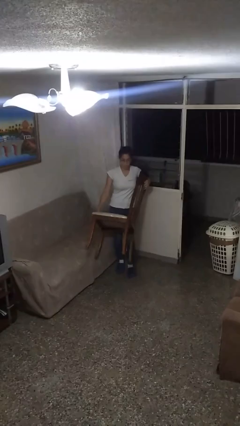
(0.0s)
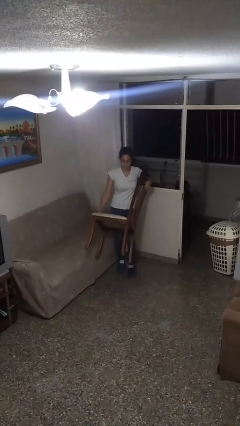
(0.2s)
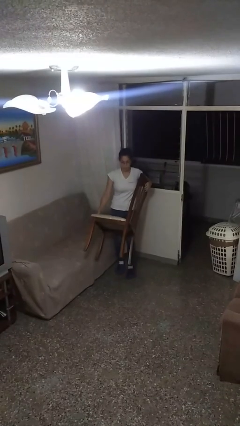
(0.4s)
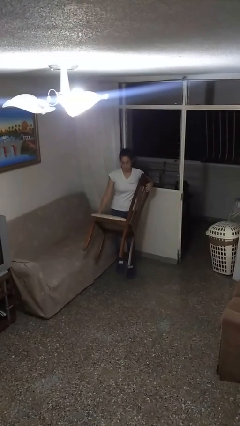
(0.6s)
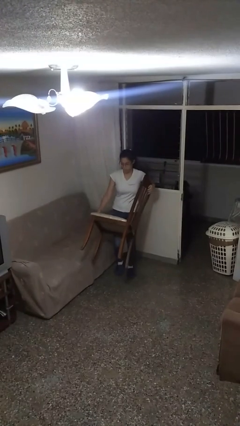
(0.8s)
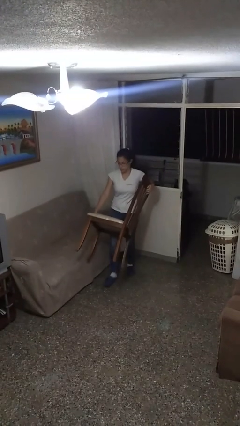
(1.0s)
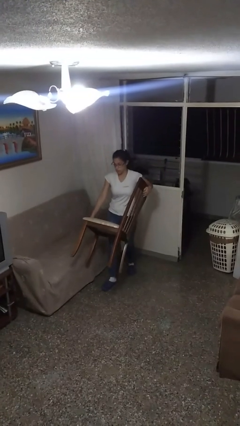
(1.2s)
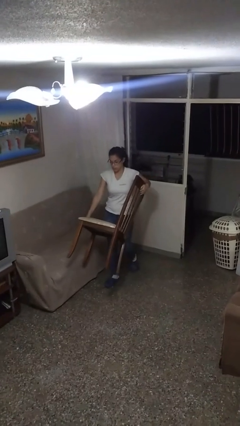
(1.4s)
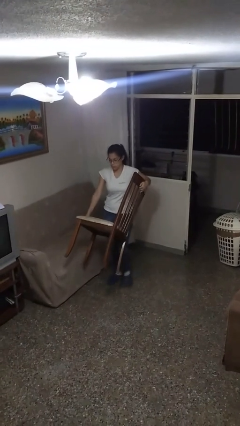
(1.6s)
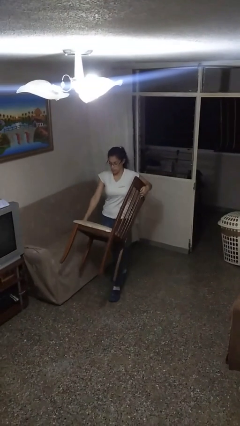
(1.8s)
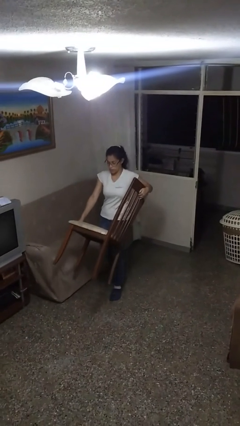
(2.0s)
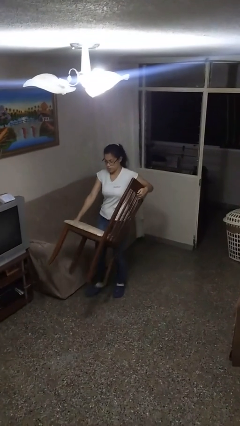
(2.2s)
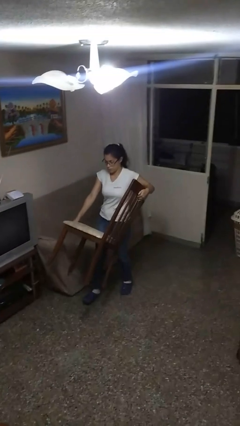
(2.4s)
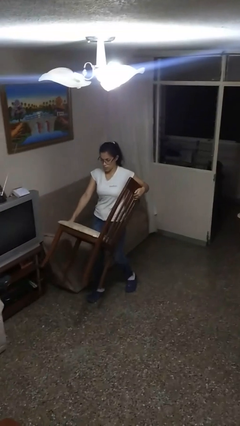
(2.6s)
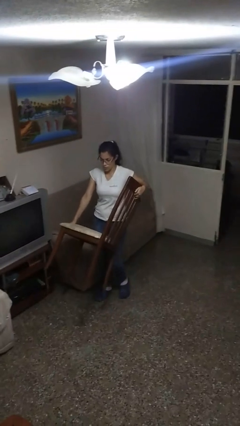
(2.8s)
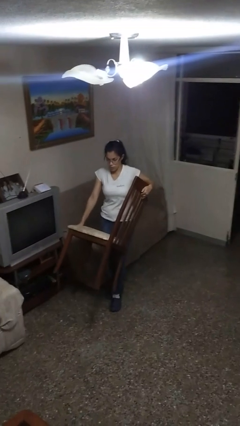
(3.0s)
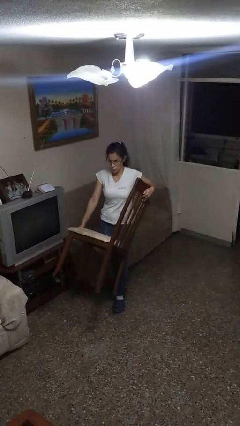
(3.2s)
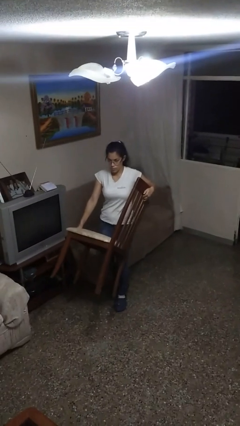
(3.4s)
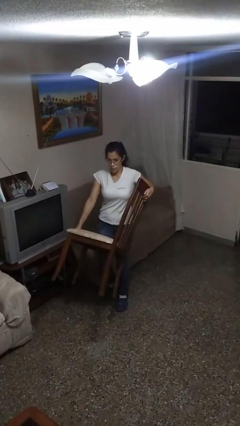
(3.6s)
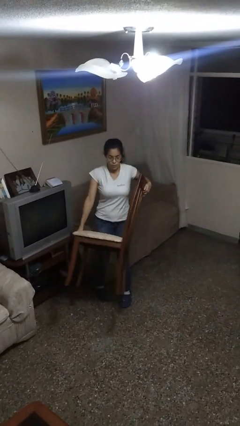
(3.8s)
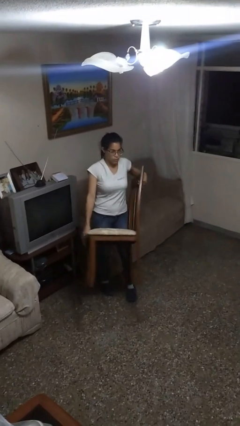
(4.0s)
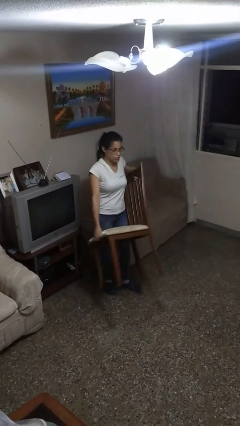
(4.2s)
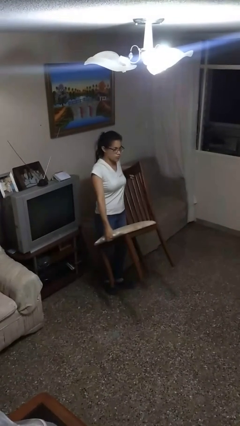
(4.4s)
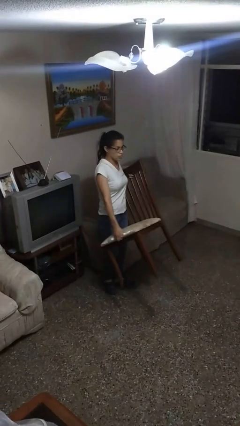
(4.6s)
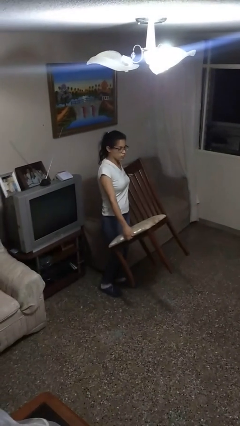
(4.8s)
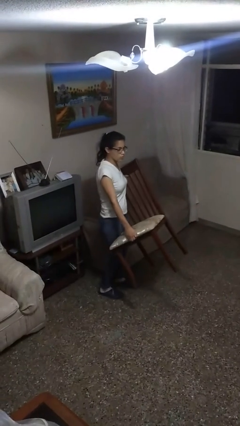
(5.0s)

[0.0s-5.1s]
person carries furniture

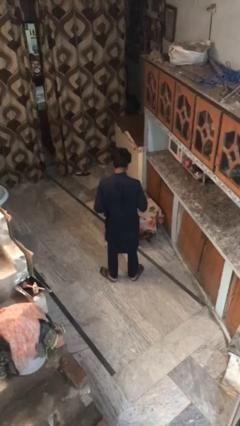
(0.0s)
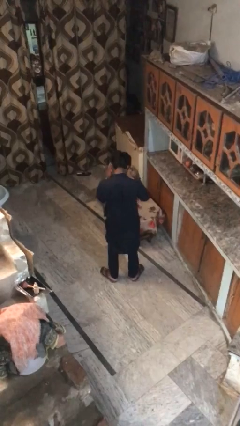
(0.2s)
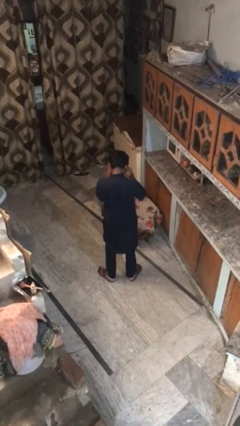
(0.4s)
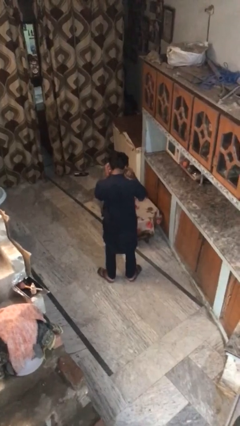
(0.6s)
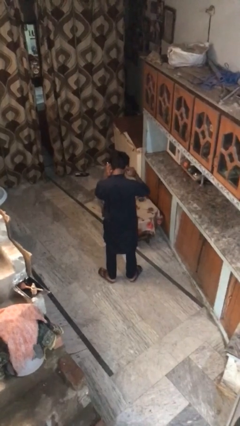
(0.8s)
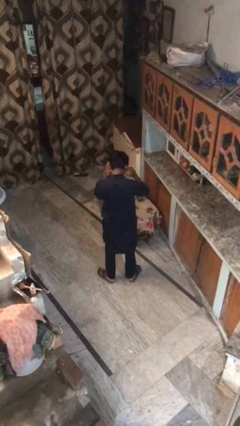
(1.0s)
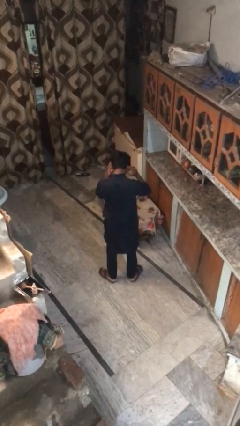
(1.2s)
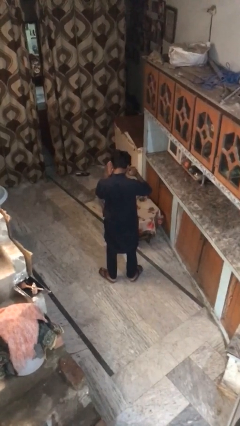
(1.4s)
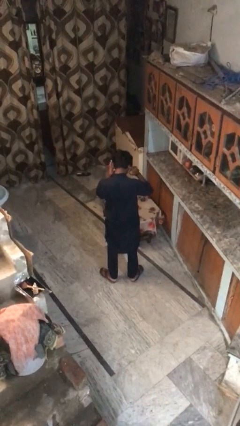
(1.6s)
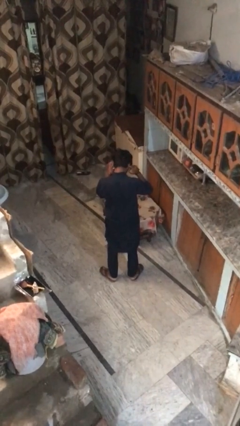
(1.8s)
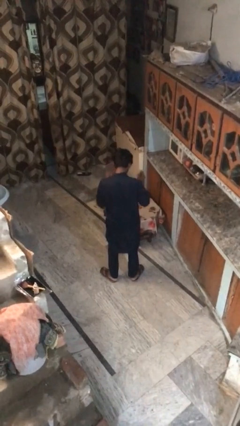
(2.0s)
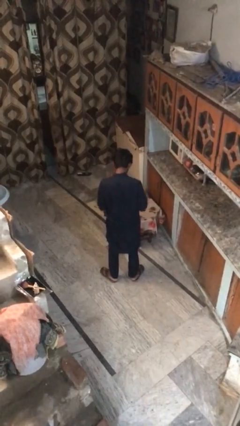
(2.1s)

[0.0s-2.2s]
person puts fingers in ear

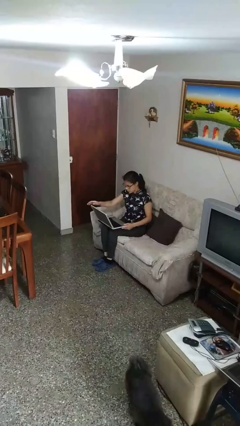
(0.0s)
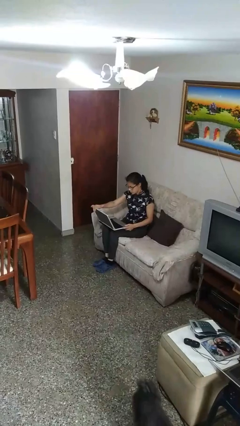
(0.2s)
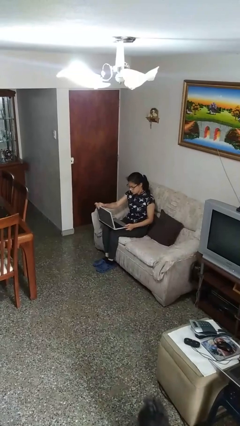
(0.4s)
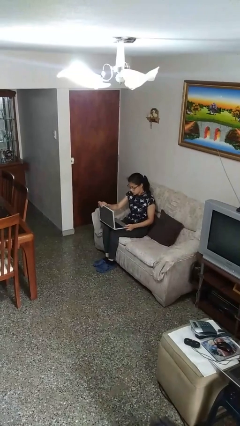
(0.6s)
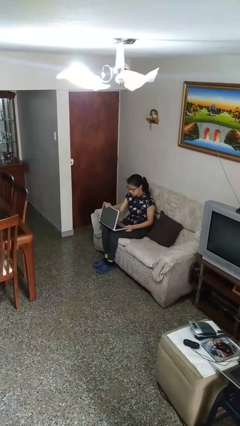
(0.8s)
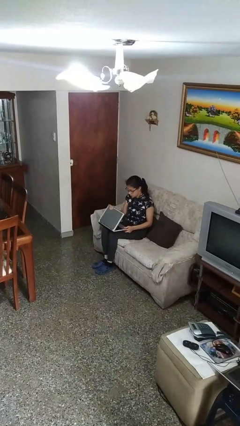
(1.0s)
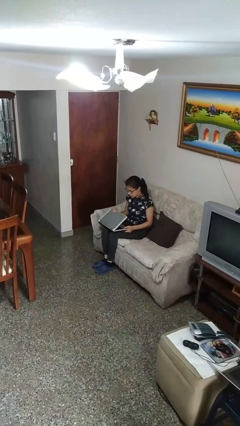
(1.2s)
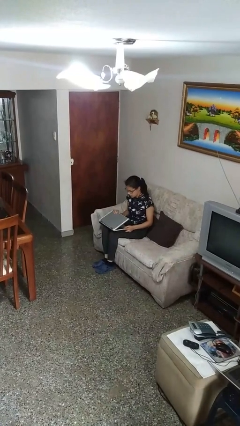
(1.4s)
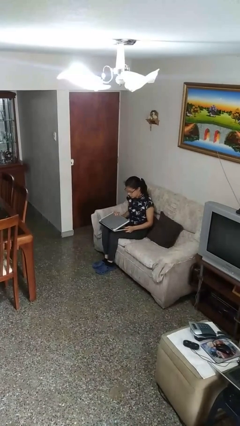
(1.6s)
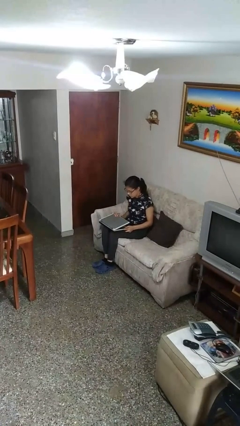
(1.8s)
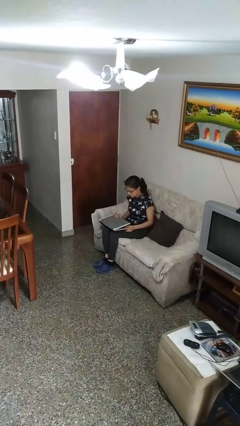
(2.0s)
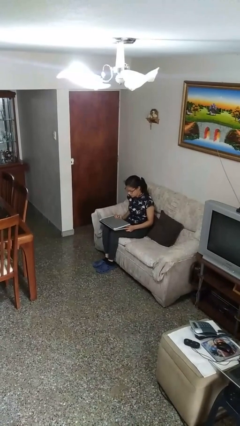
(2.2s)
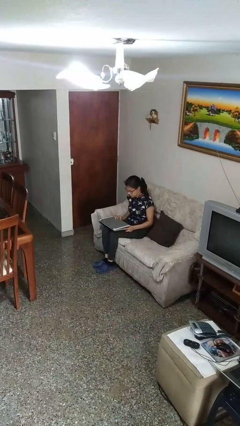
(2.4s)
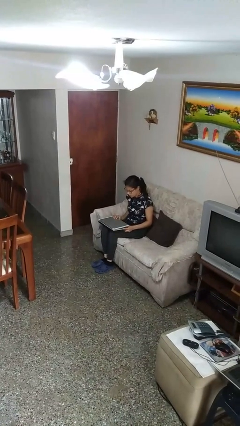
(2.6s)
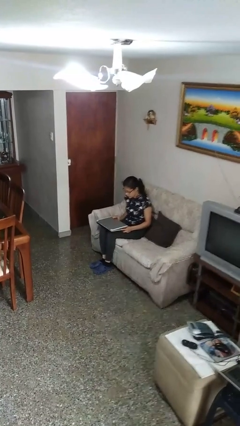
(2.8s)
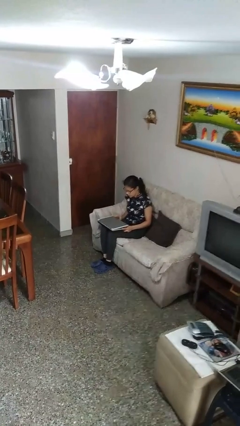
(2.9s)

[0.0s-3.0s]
person closes laptop

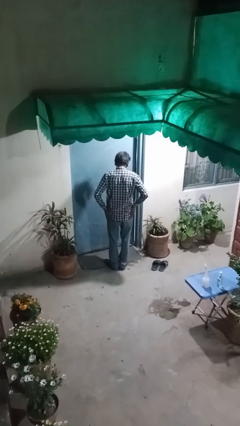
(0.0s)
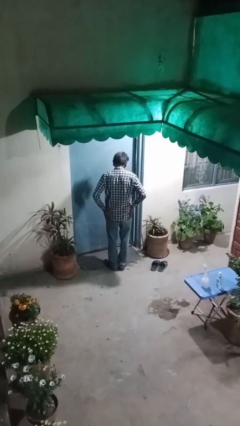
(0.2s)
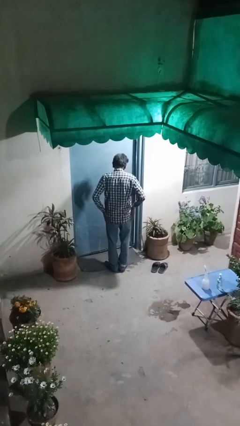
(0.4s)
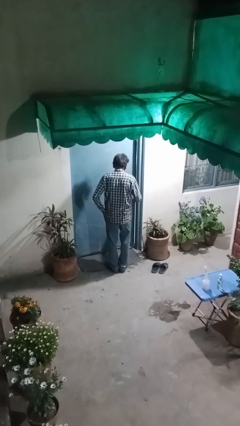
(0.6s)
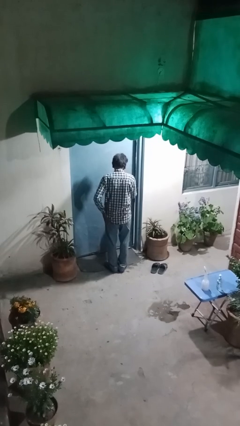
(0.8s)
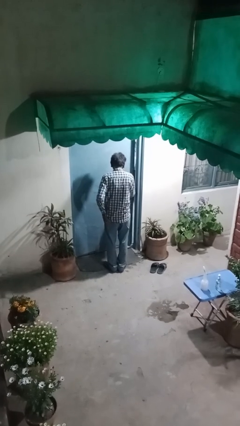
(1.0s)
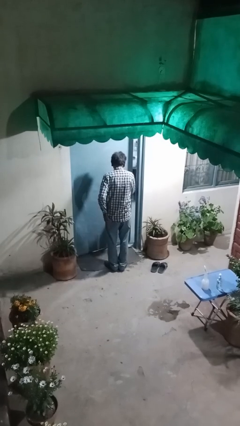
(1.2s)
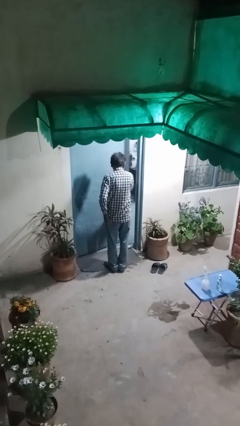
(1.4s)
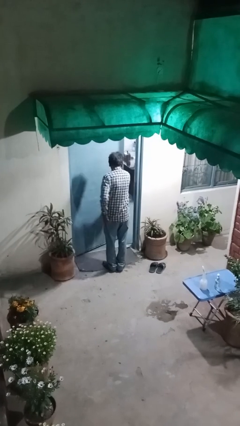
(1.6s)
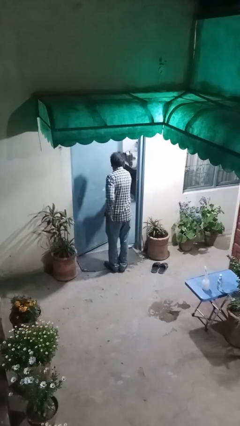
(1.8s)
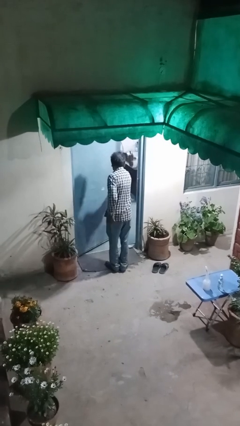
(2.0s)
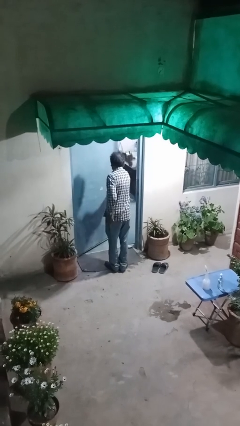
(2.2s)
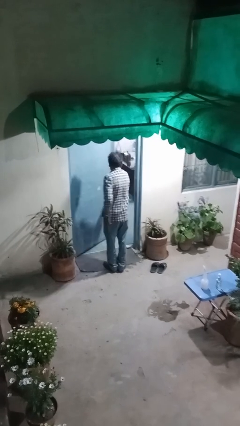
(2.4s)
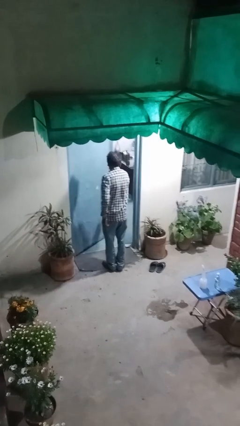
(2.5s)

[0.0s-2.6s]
person opens facility door

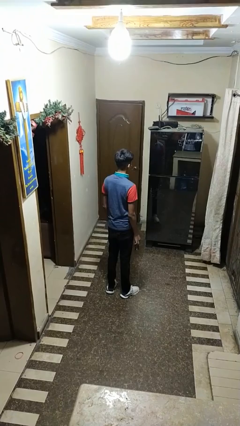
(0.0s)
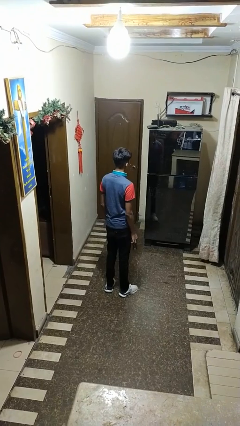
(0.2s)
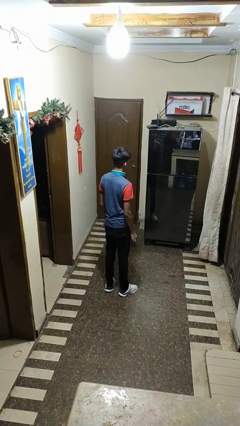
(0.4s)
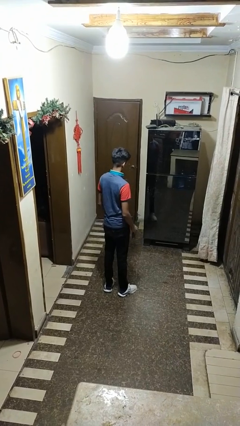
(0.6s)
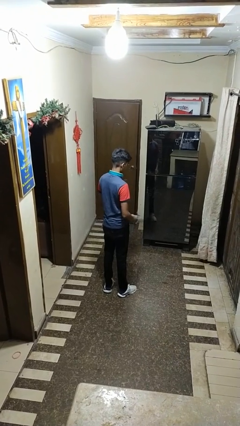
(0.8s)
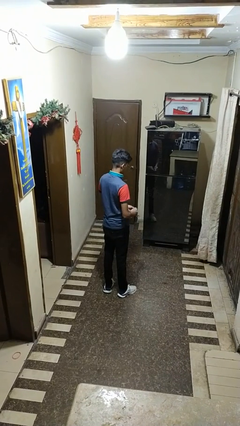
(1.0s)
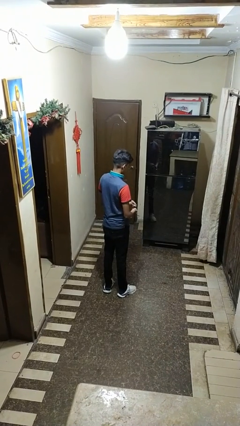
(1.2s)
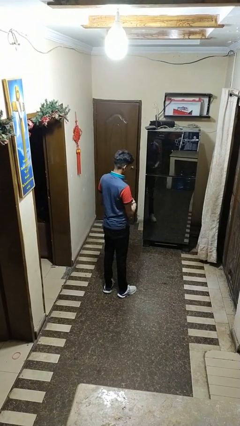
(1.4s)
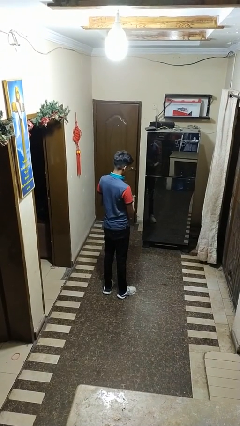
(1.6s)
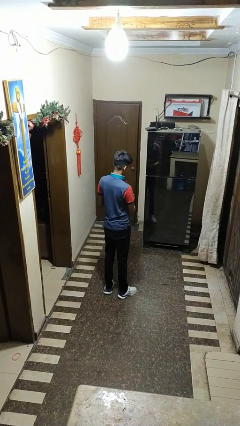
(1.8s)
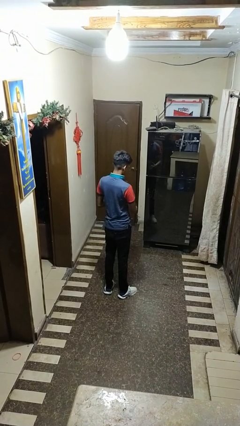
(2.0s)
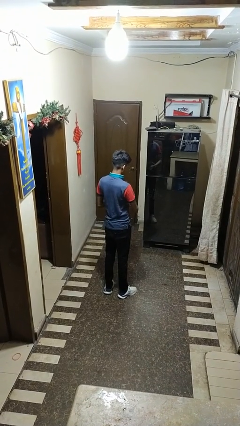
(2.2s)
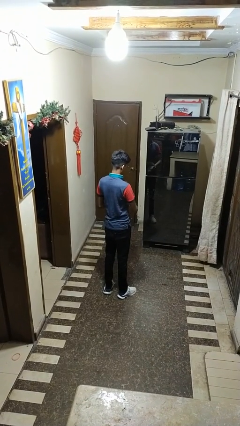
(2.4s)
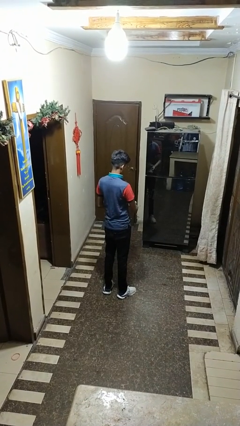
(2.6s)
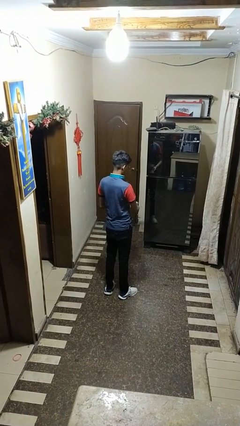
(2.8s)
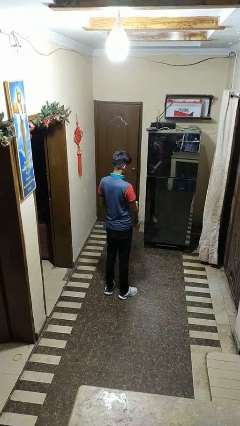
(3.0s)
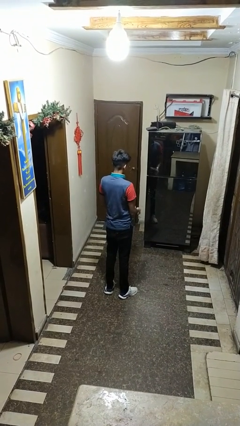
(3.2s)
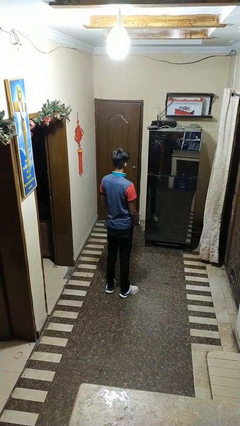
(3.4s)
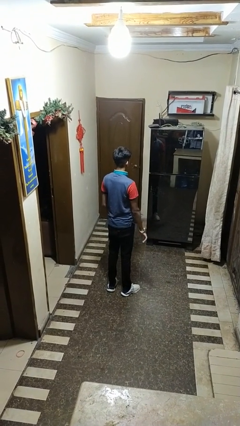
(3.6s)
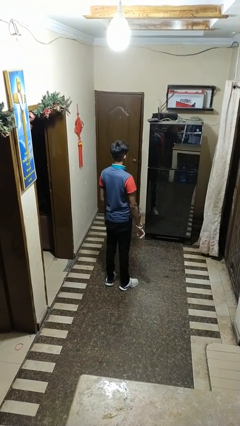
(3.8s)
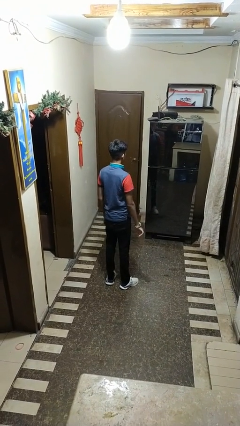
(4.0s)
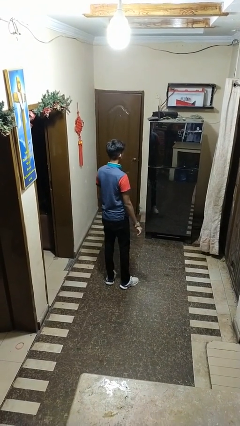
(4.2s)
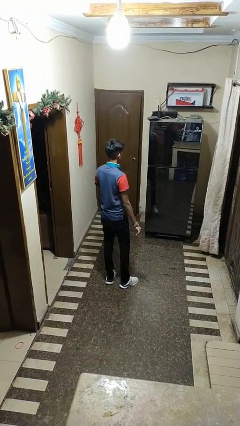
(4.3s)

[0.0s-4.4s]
person puts on wristwatch
